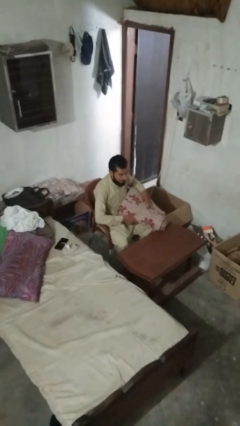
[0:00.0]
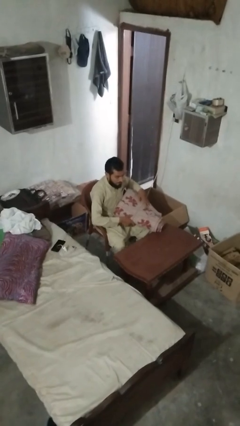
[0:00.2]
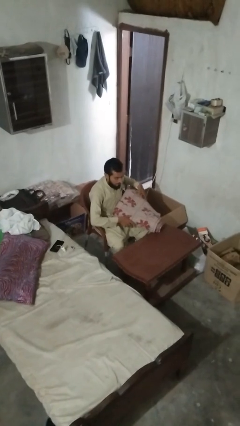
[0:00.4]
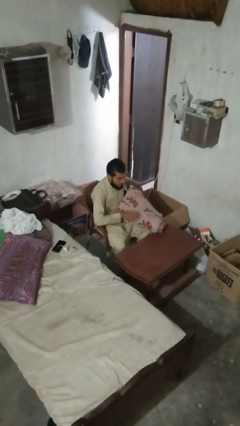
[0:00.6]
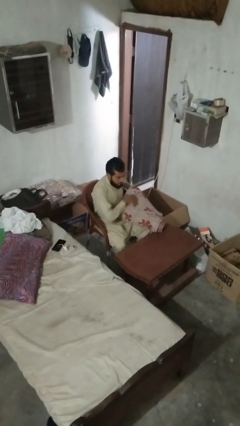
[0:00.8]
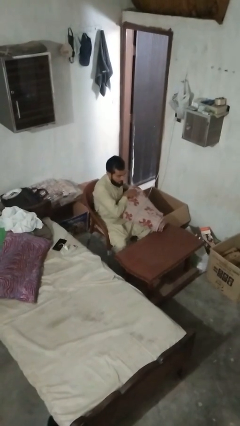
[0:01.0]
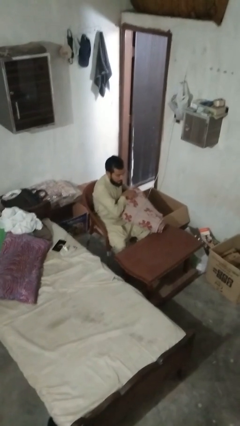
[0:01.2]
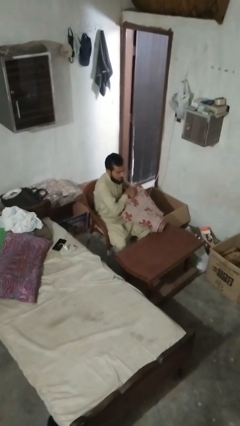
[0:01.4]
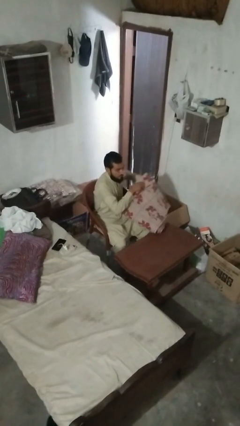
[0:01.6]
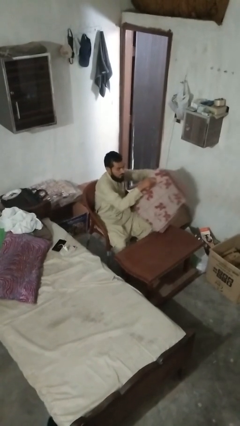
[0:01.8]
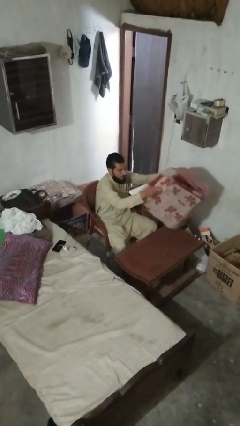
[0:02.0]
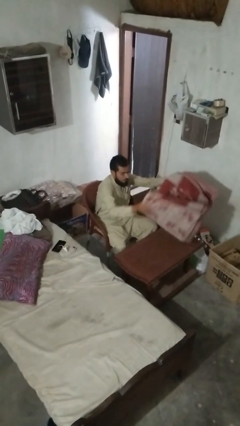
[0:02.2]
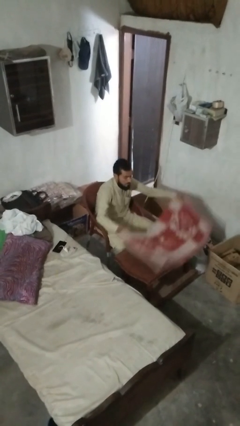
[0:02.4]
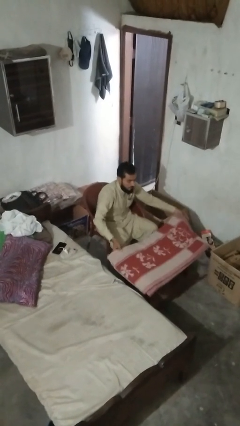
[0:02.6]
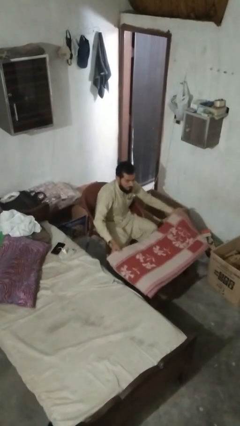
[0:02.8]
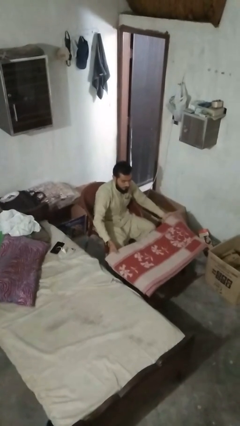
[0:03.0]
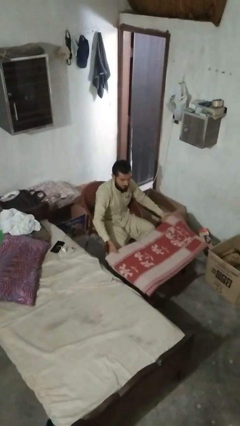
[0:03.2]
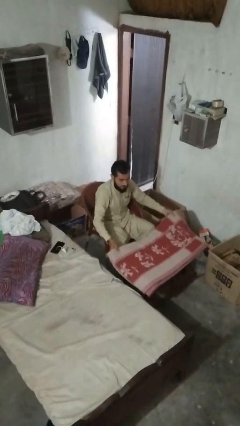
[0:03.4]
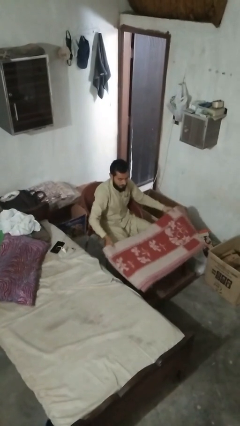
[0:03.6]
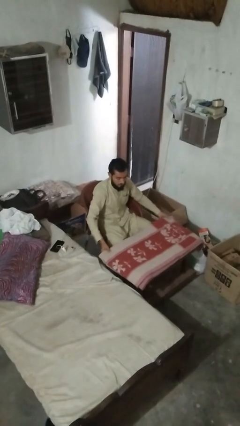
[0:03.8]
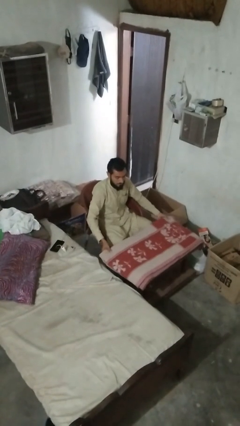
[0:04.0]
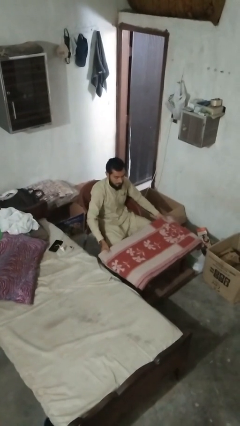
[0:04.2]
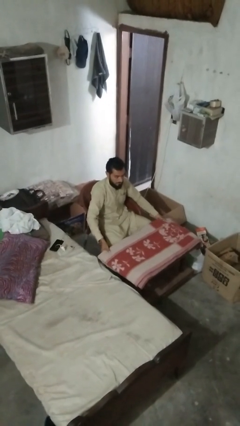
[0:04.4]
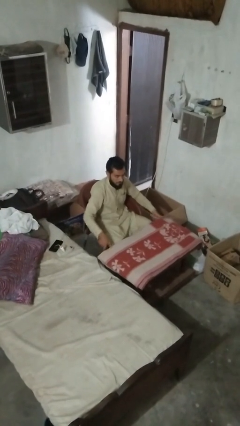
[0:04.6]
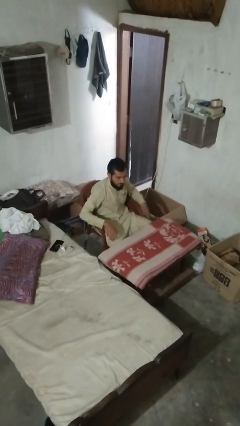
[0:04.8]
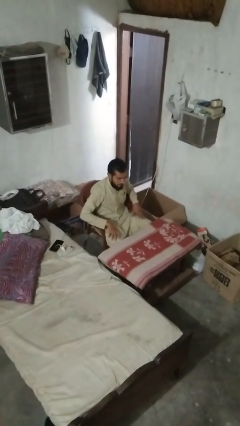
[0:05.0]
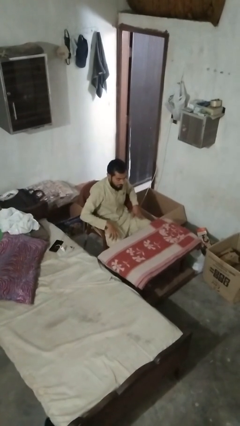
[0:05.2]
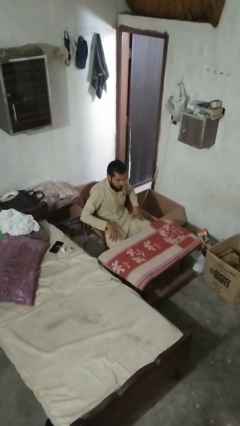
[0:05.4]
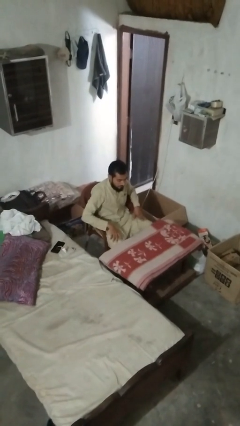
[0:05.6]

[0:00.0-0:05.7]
person spreads tablecloth

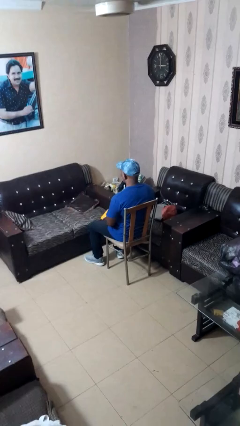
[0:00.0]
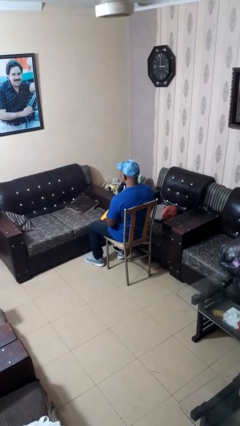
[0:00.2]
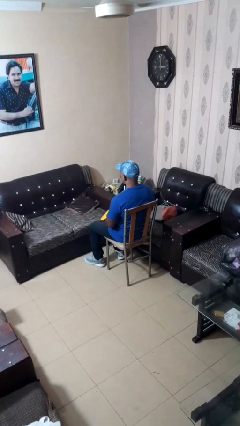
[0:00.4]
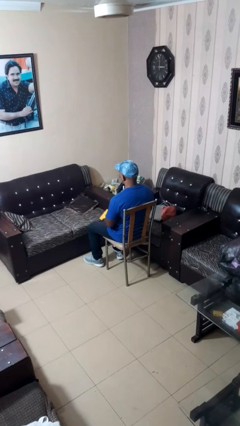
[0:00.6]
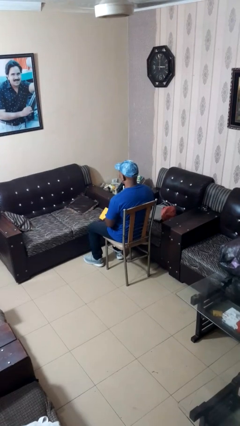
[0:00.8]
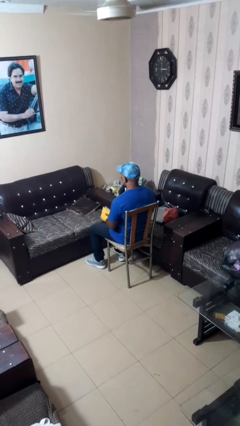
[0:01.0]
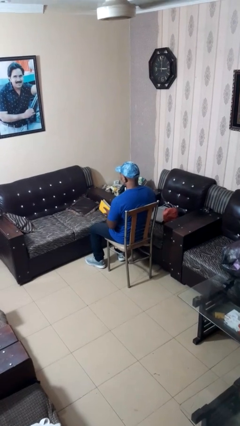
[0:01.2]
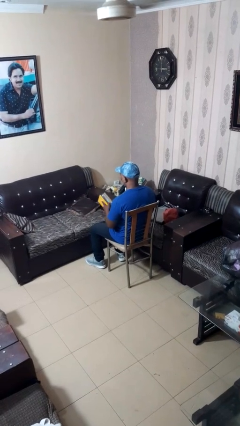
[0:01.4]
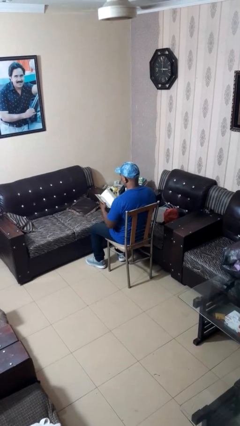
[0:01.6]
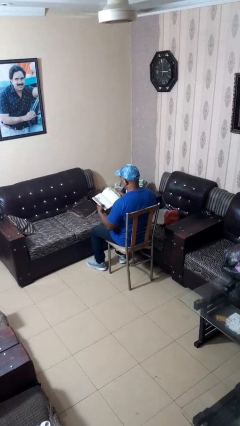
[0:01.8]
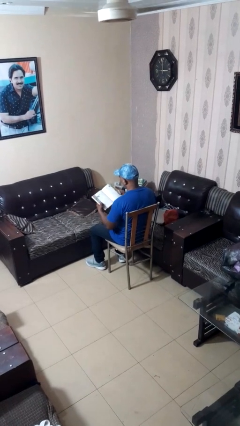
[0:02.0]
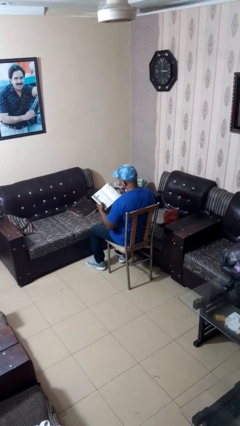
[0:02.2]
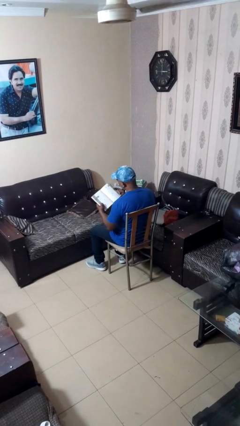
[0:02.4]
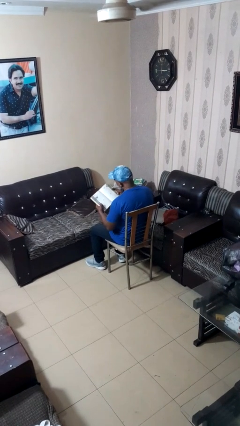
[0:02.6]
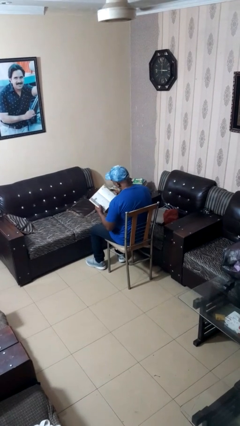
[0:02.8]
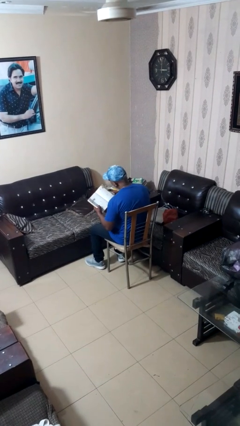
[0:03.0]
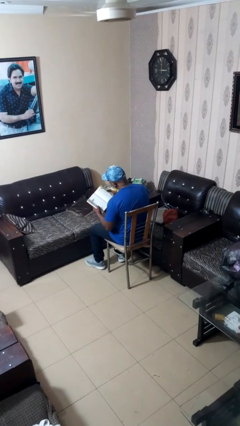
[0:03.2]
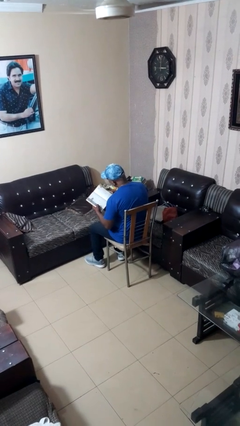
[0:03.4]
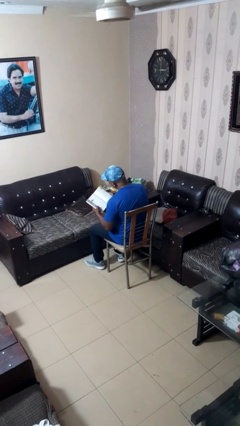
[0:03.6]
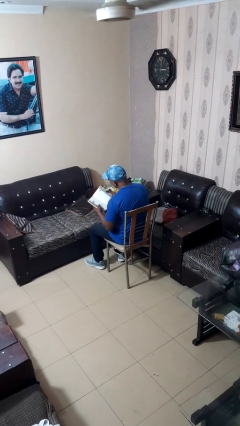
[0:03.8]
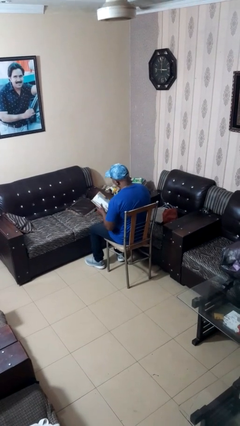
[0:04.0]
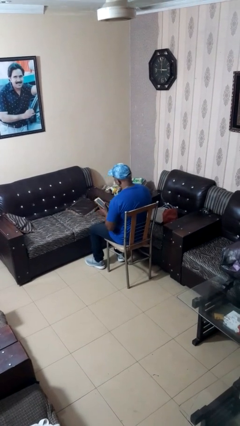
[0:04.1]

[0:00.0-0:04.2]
person reads book

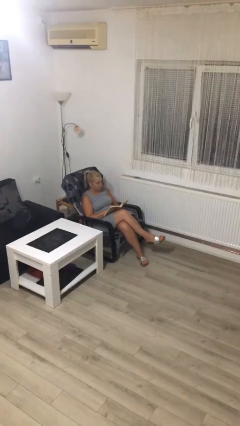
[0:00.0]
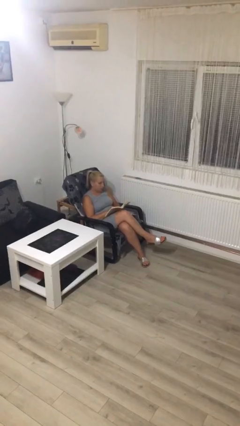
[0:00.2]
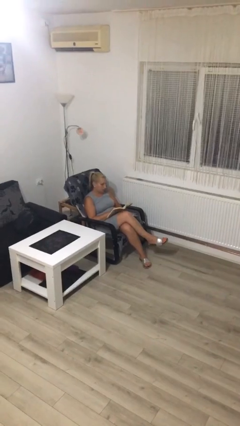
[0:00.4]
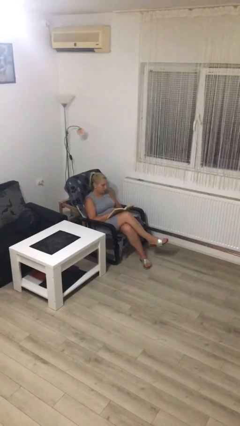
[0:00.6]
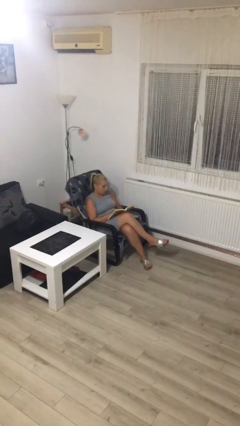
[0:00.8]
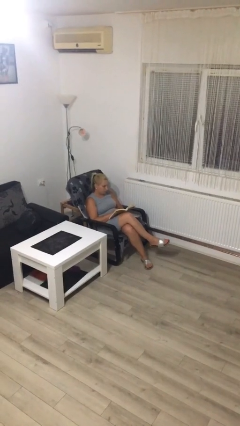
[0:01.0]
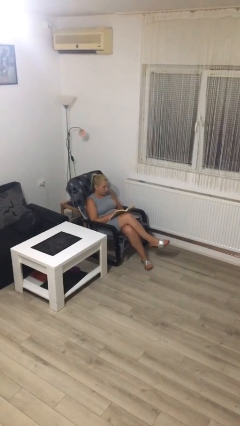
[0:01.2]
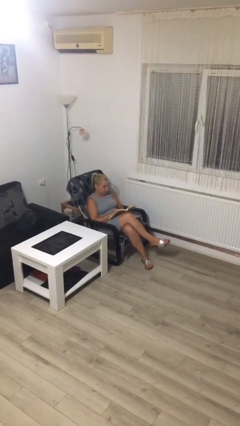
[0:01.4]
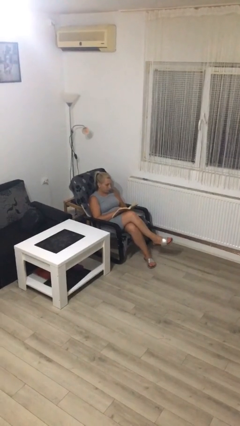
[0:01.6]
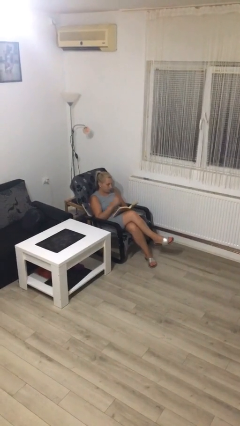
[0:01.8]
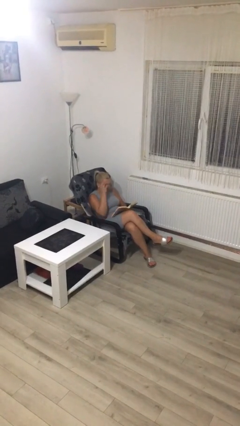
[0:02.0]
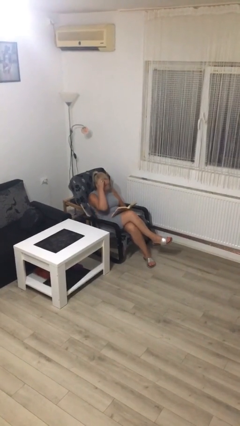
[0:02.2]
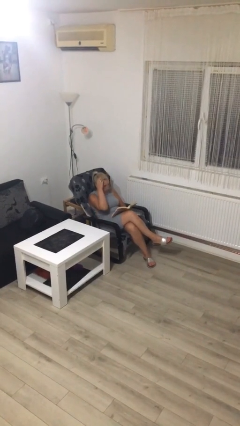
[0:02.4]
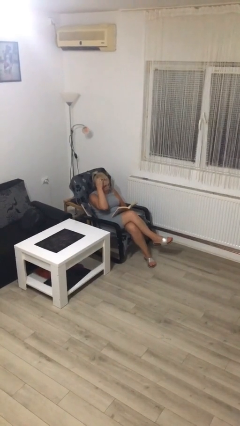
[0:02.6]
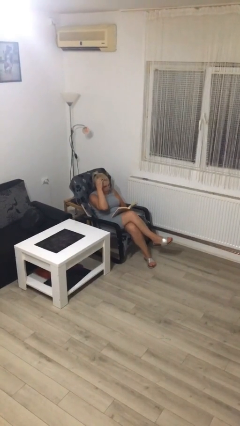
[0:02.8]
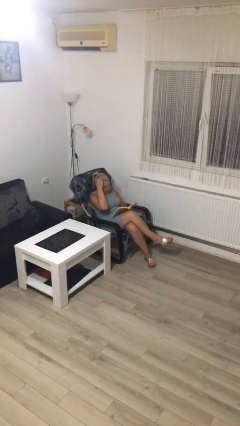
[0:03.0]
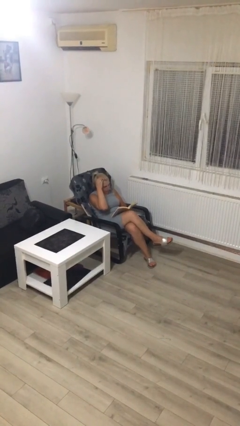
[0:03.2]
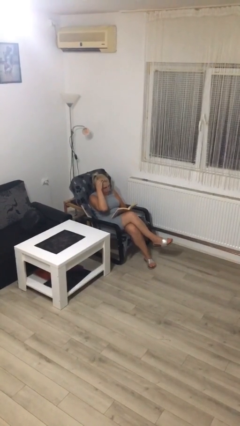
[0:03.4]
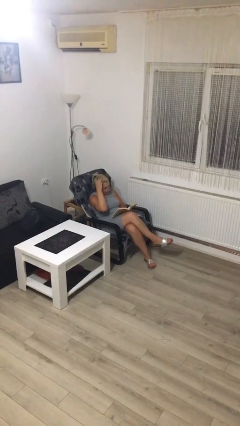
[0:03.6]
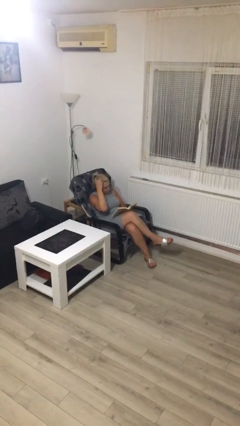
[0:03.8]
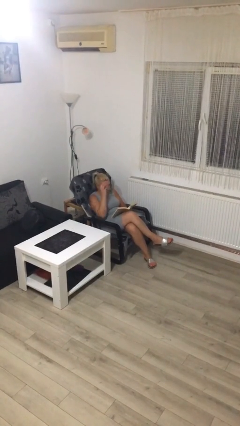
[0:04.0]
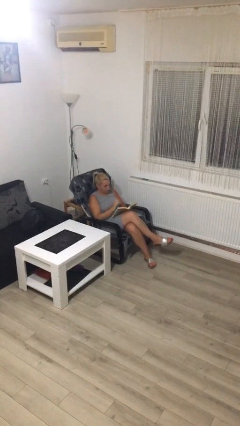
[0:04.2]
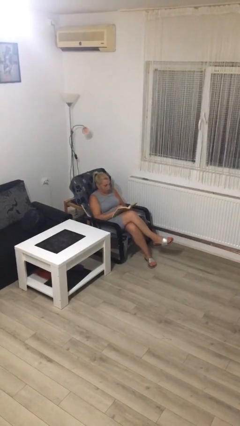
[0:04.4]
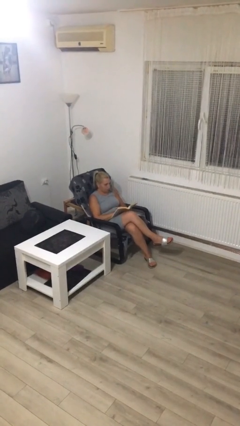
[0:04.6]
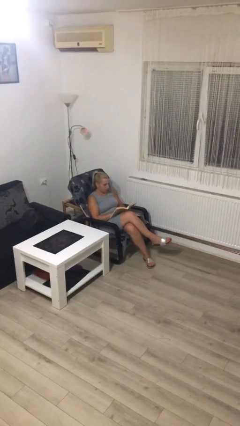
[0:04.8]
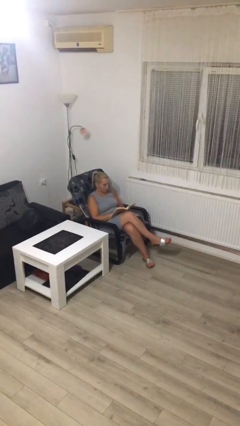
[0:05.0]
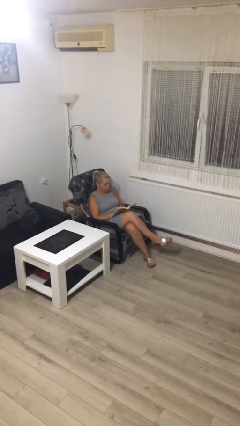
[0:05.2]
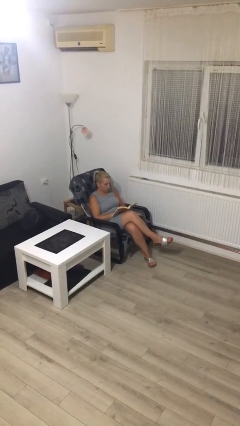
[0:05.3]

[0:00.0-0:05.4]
person reads document

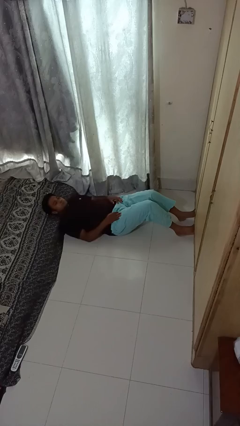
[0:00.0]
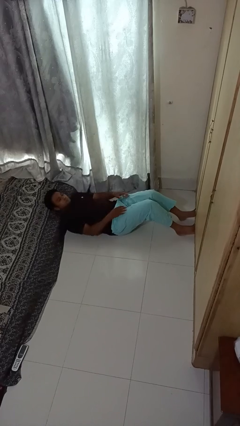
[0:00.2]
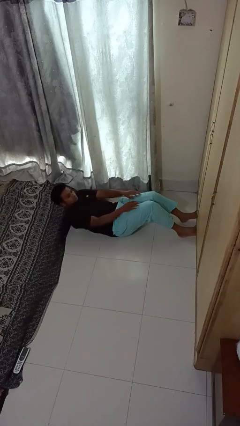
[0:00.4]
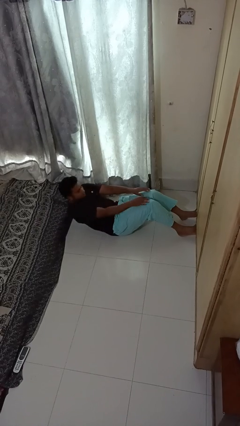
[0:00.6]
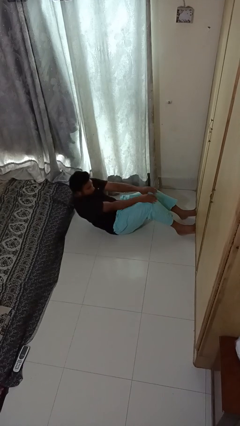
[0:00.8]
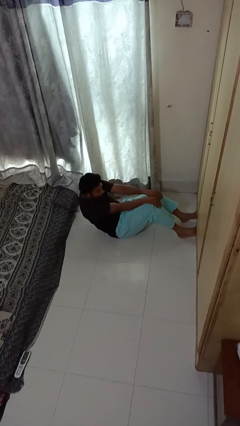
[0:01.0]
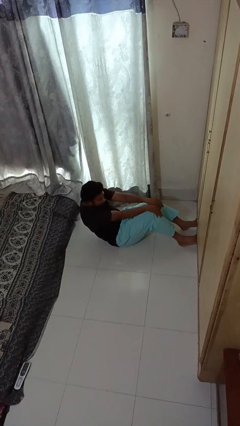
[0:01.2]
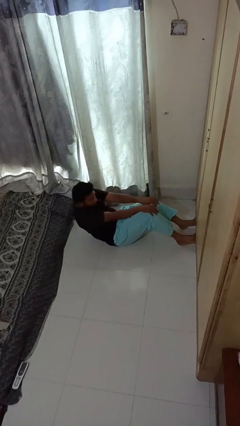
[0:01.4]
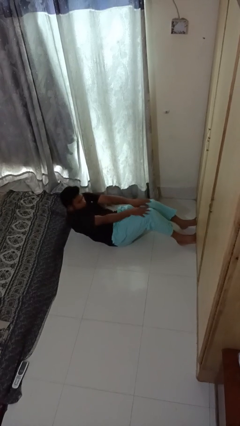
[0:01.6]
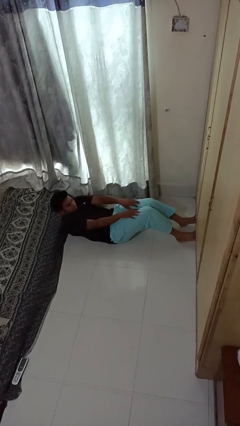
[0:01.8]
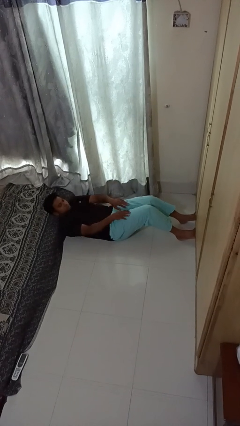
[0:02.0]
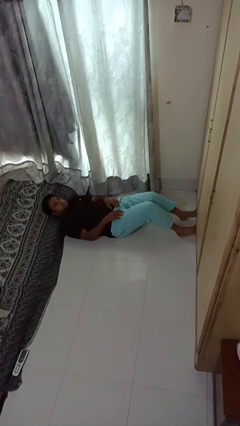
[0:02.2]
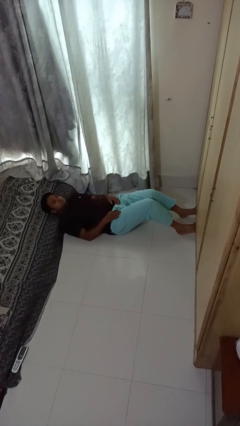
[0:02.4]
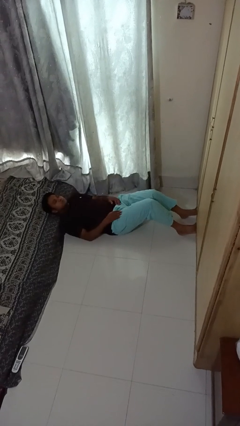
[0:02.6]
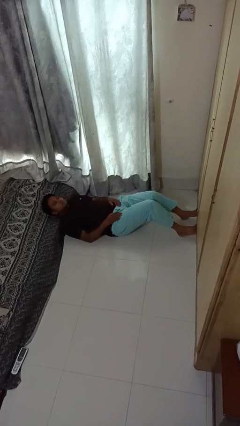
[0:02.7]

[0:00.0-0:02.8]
person exercises with situp
